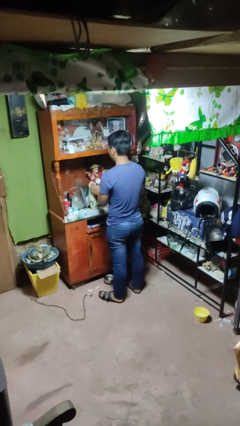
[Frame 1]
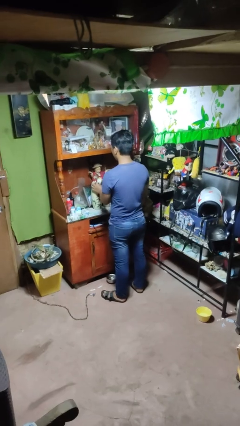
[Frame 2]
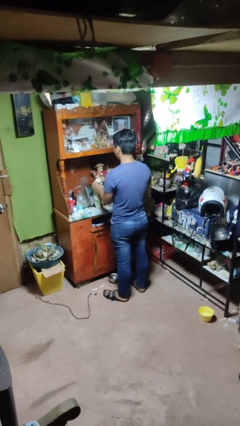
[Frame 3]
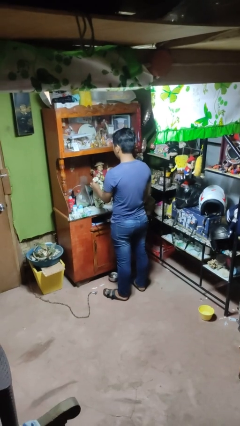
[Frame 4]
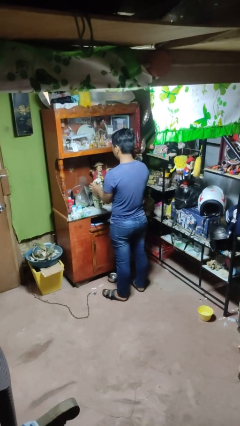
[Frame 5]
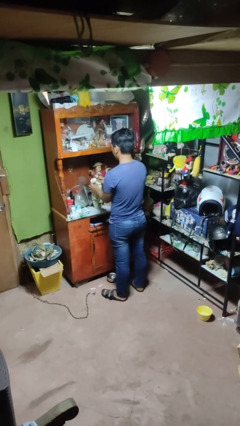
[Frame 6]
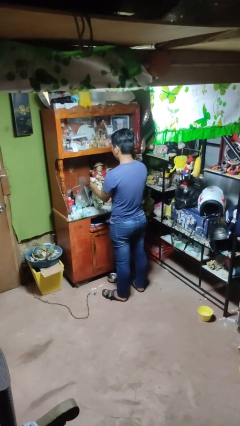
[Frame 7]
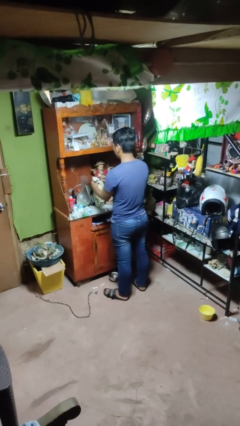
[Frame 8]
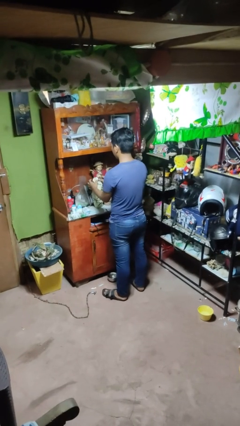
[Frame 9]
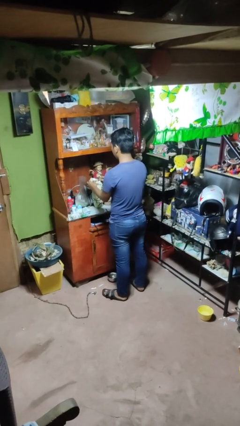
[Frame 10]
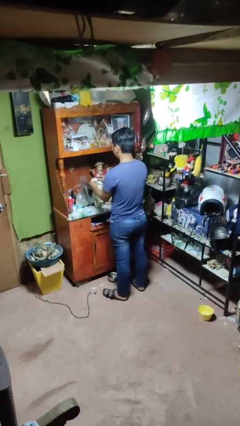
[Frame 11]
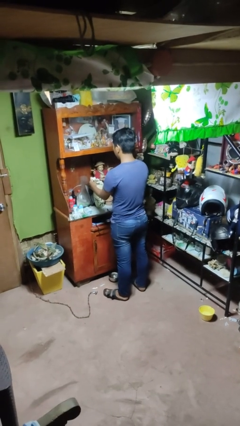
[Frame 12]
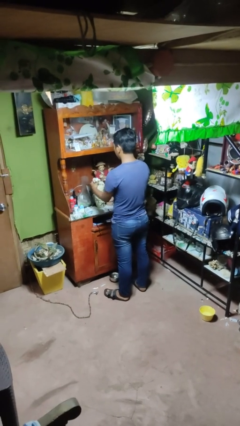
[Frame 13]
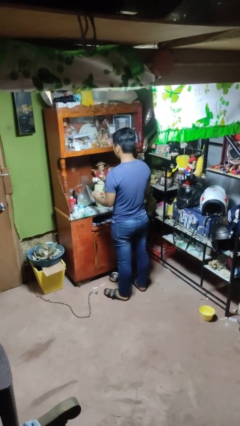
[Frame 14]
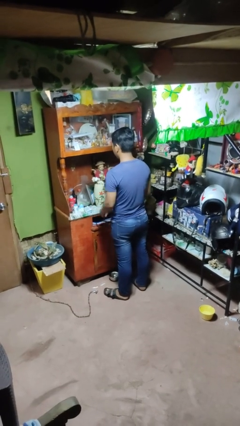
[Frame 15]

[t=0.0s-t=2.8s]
person arranges flowers in vase

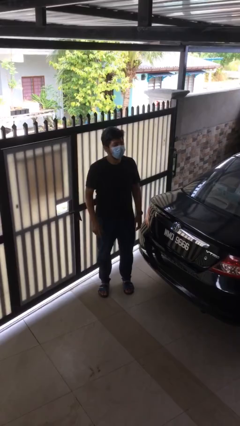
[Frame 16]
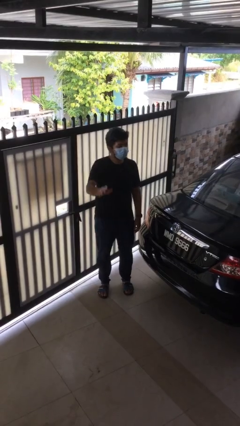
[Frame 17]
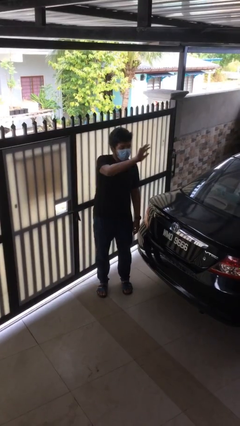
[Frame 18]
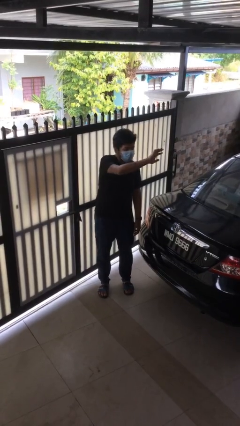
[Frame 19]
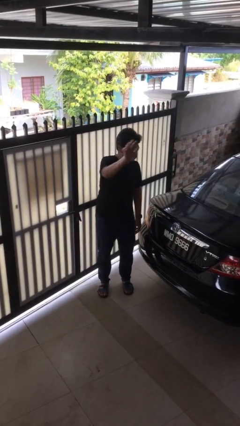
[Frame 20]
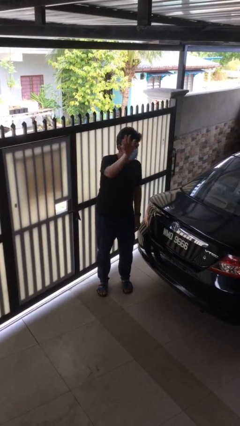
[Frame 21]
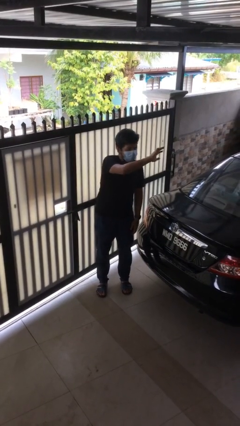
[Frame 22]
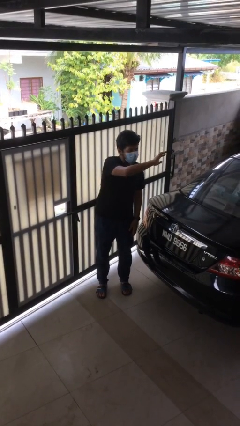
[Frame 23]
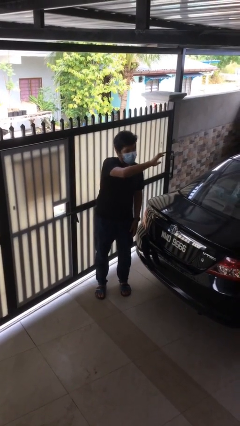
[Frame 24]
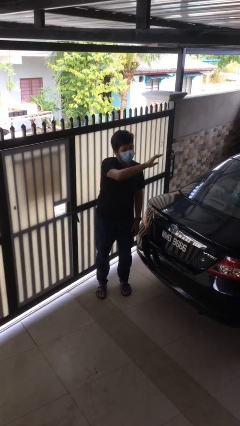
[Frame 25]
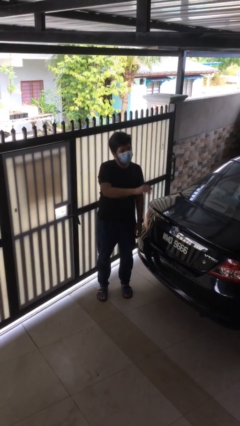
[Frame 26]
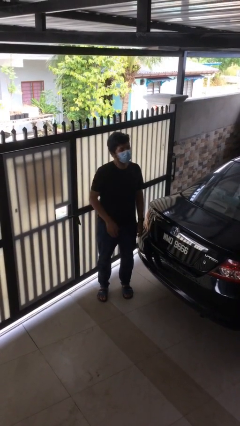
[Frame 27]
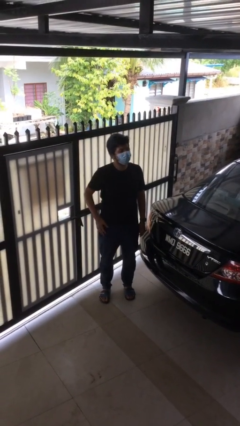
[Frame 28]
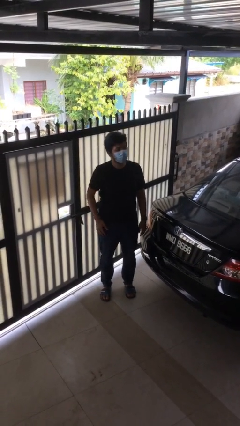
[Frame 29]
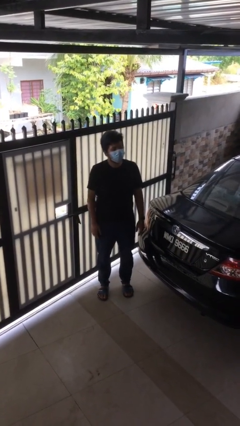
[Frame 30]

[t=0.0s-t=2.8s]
person waves at person

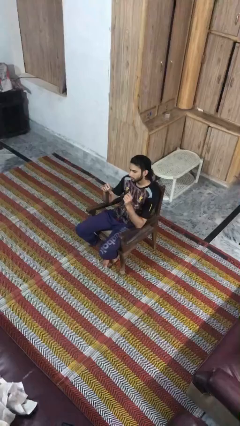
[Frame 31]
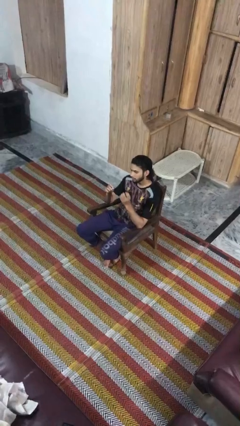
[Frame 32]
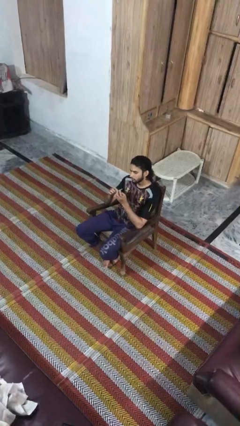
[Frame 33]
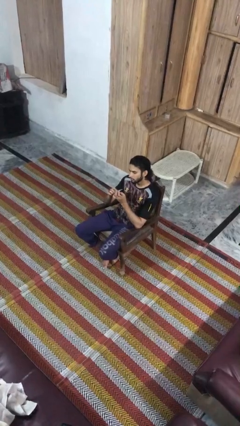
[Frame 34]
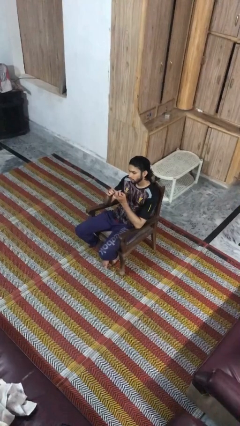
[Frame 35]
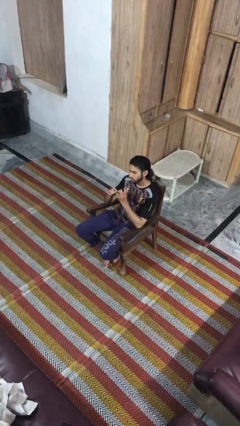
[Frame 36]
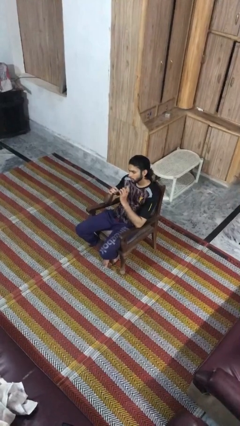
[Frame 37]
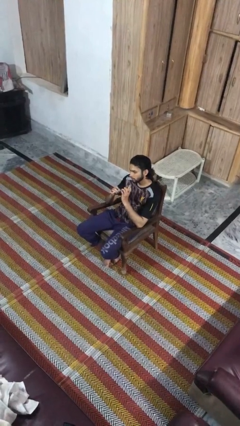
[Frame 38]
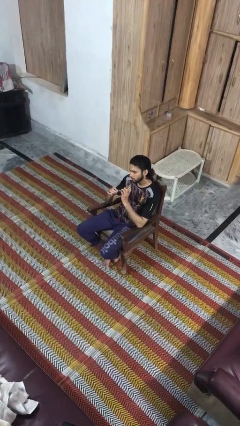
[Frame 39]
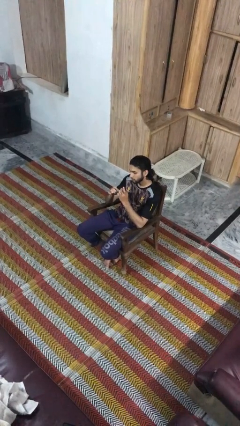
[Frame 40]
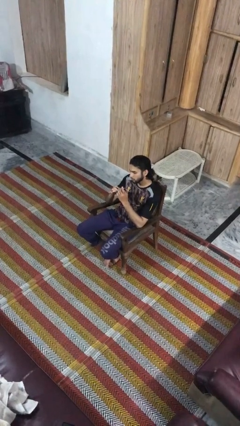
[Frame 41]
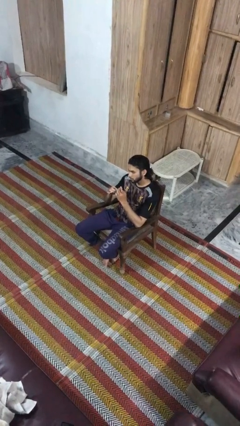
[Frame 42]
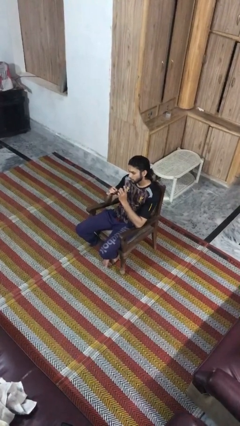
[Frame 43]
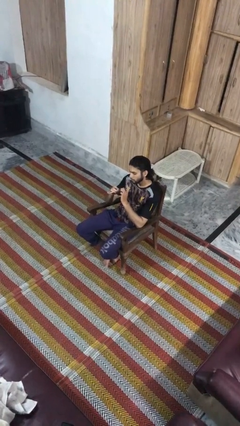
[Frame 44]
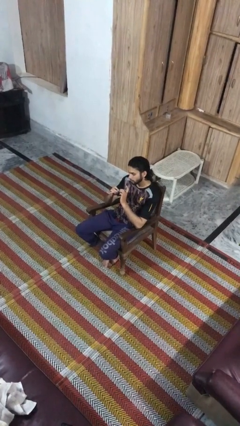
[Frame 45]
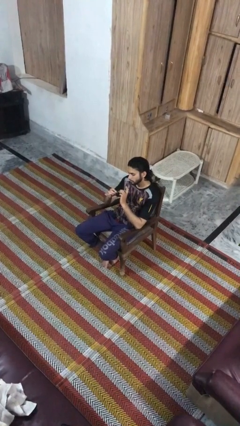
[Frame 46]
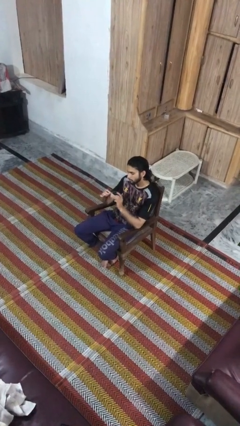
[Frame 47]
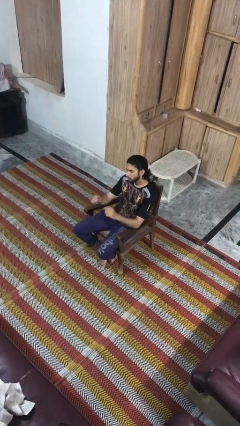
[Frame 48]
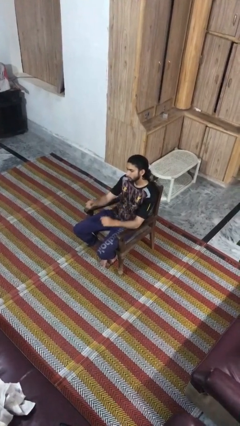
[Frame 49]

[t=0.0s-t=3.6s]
person files fingernails

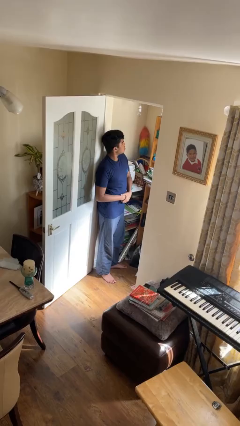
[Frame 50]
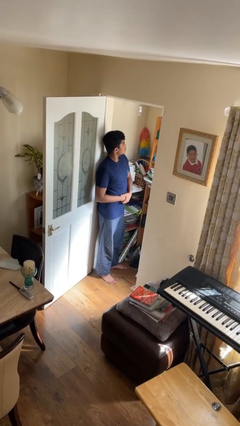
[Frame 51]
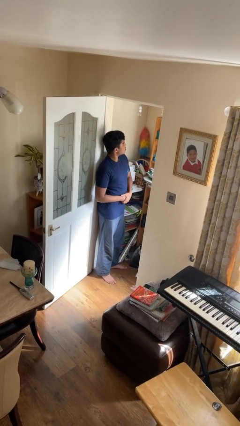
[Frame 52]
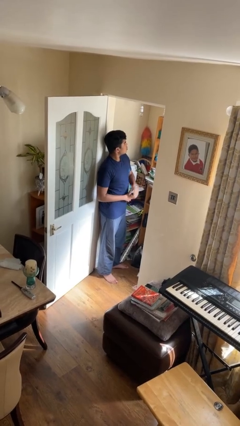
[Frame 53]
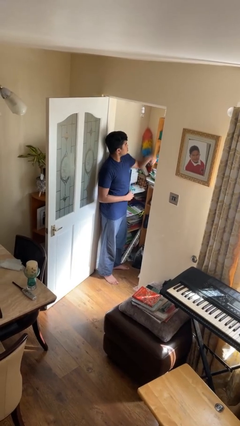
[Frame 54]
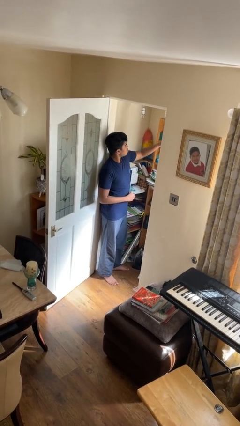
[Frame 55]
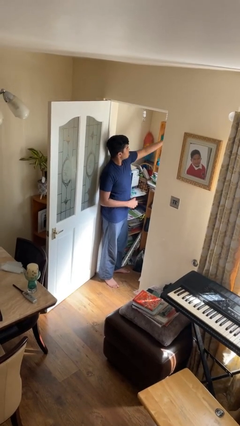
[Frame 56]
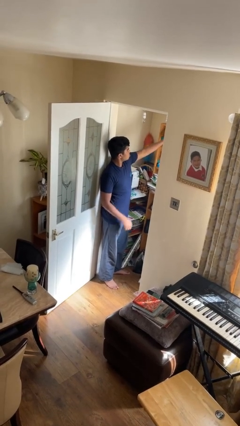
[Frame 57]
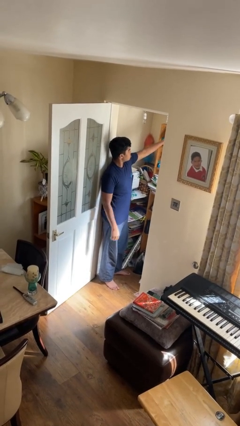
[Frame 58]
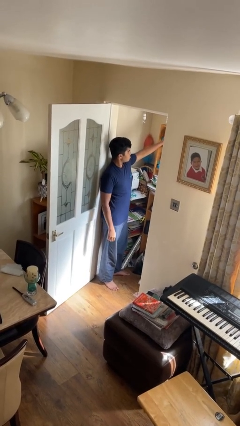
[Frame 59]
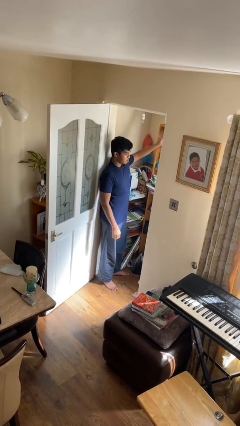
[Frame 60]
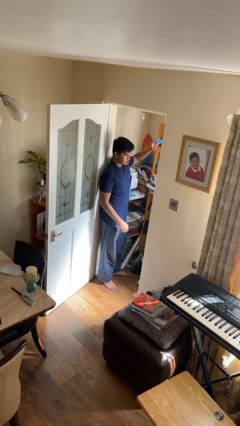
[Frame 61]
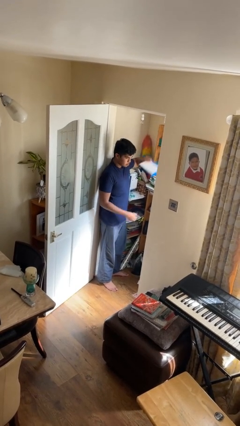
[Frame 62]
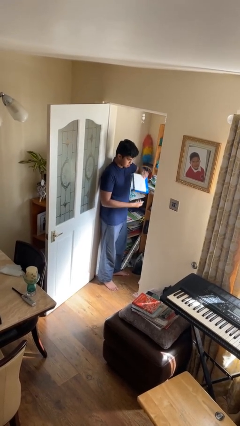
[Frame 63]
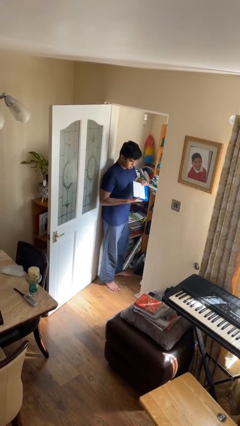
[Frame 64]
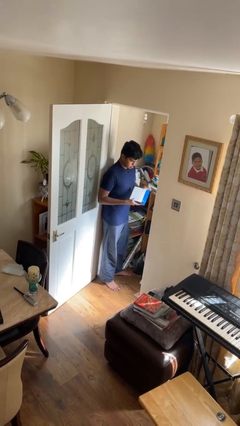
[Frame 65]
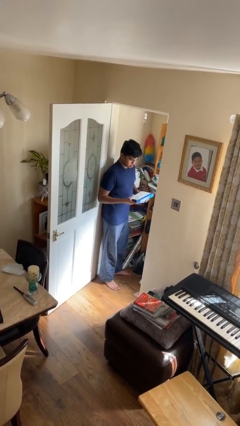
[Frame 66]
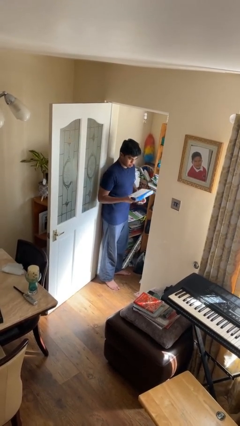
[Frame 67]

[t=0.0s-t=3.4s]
person picks up object from shelf

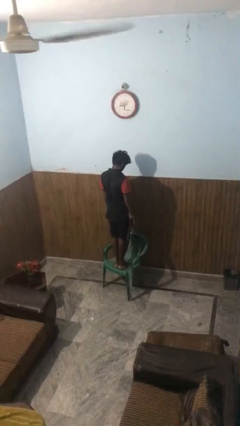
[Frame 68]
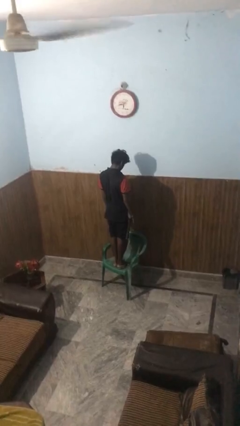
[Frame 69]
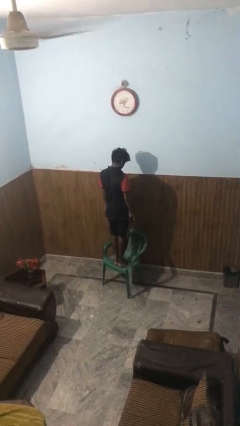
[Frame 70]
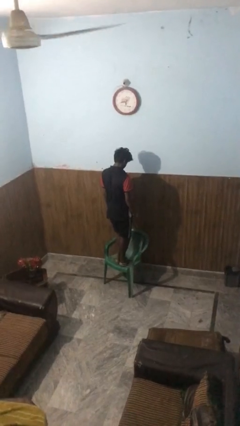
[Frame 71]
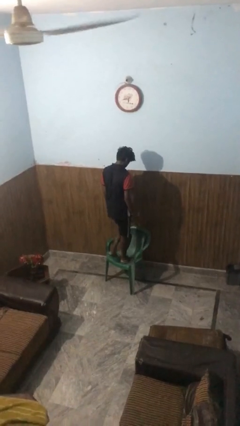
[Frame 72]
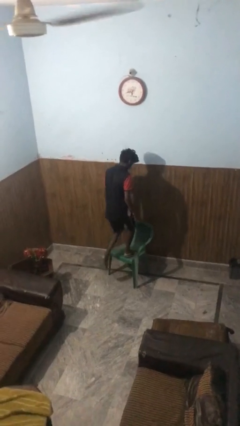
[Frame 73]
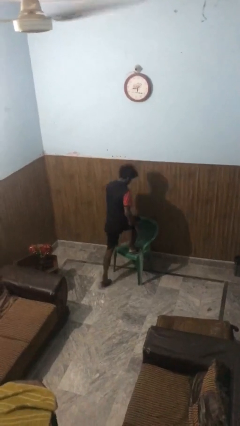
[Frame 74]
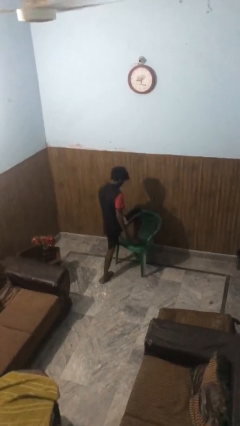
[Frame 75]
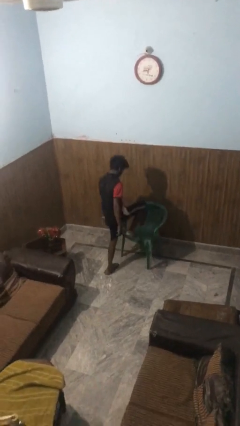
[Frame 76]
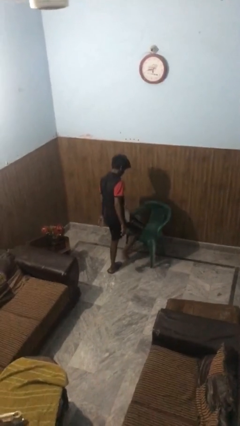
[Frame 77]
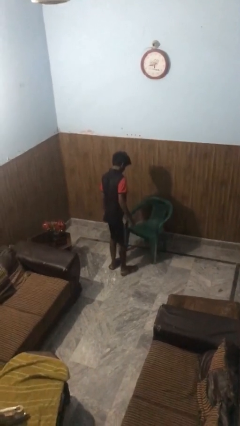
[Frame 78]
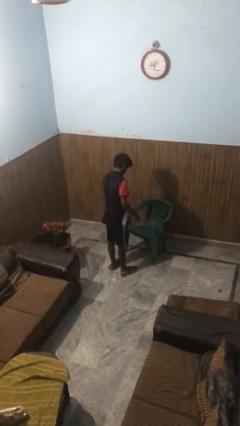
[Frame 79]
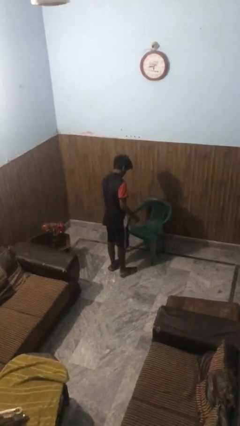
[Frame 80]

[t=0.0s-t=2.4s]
person climbs off chair

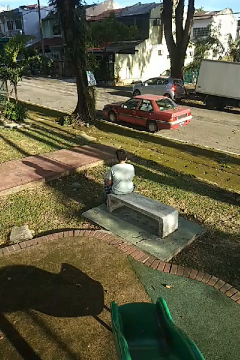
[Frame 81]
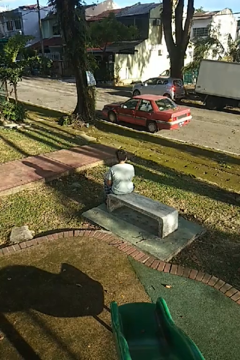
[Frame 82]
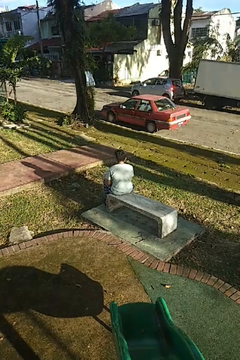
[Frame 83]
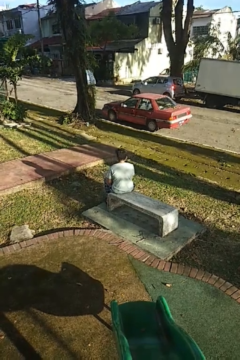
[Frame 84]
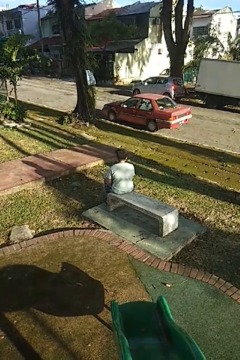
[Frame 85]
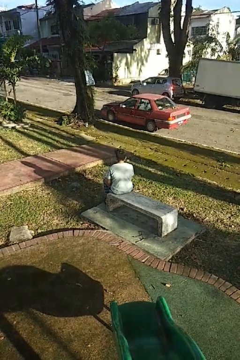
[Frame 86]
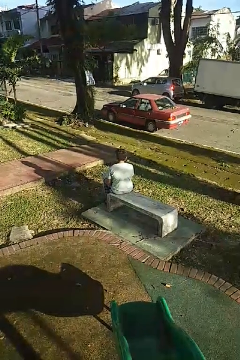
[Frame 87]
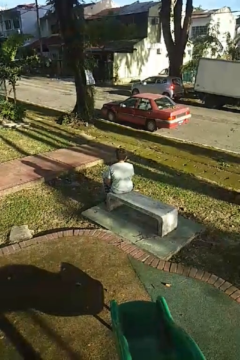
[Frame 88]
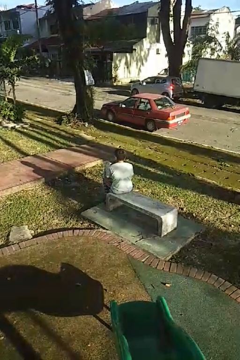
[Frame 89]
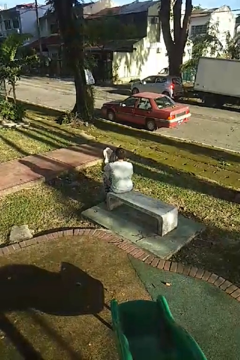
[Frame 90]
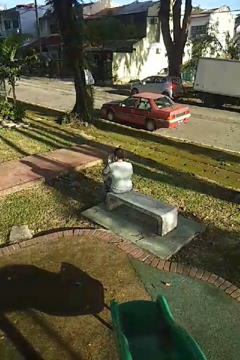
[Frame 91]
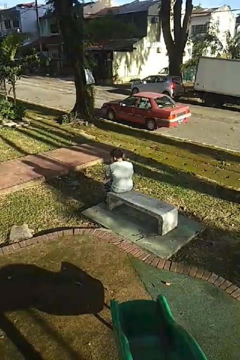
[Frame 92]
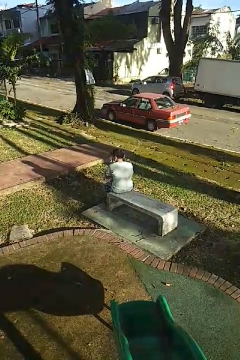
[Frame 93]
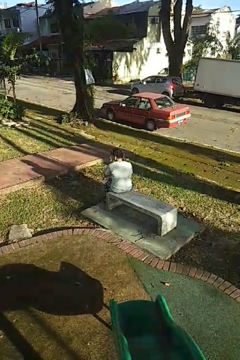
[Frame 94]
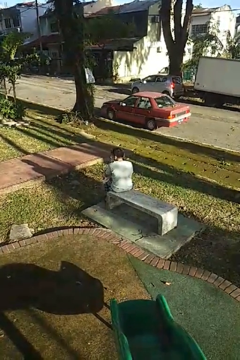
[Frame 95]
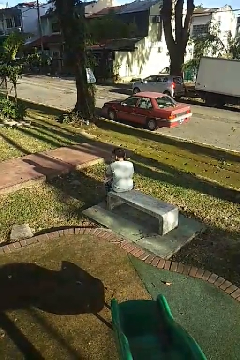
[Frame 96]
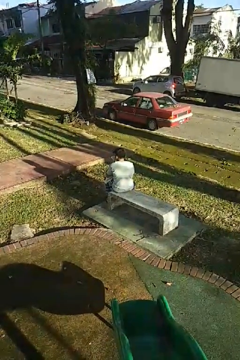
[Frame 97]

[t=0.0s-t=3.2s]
person blows nose
